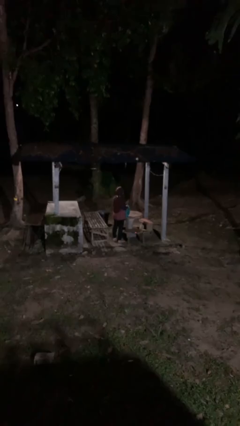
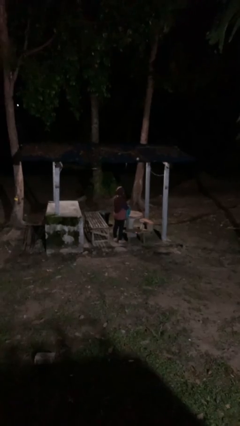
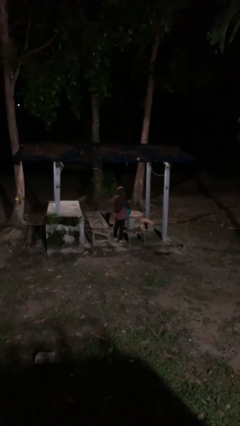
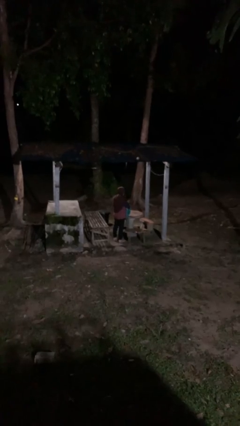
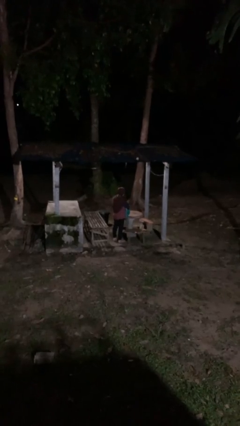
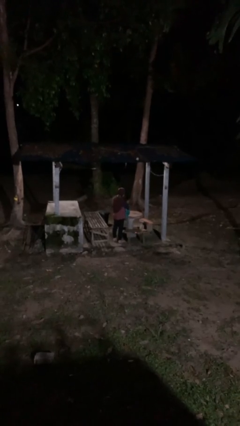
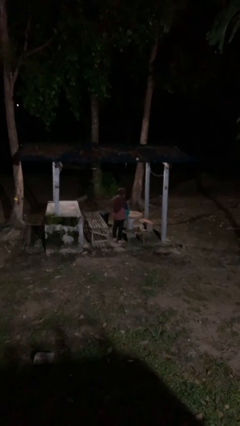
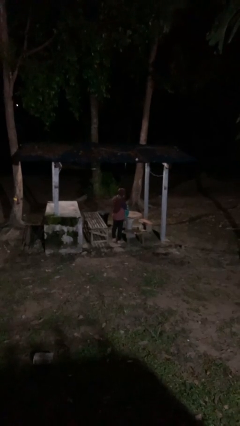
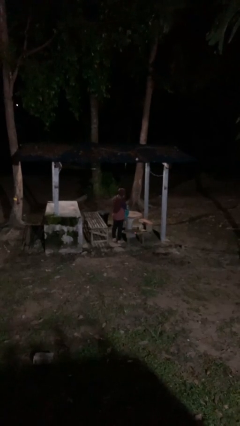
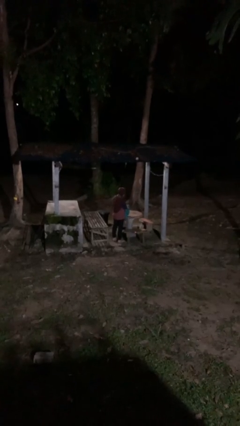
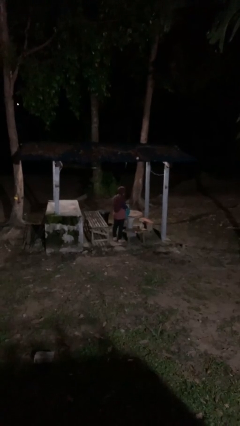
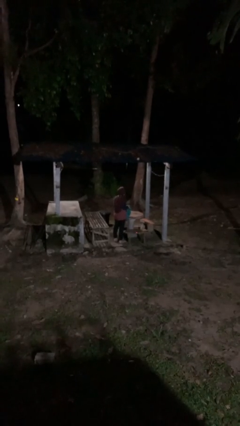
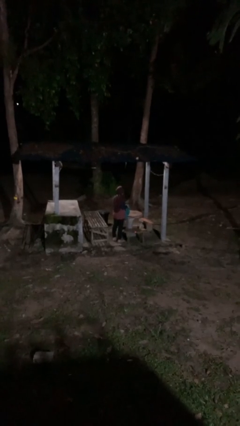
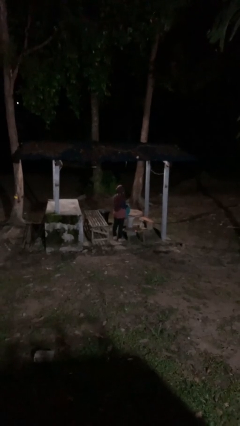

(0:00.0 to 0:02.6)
person searches in bag

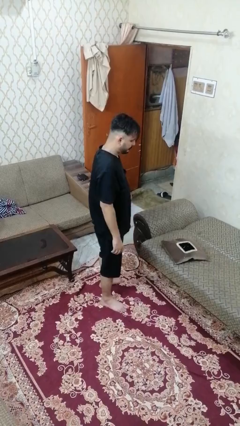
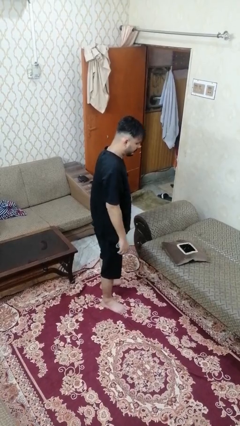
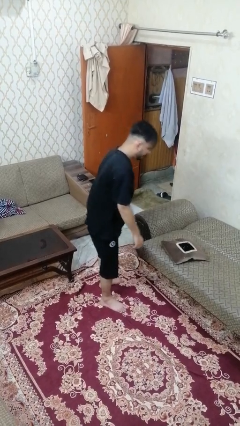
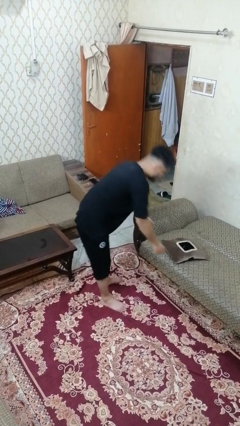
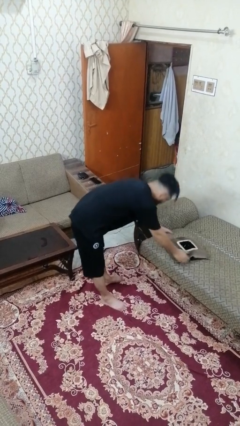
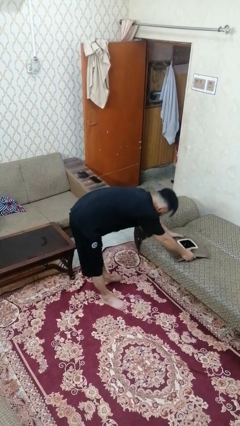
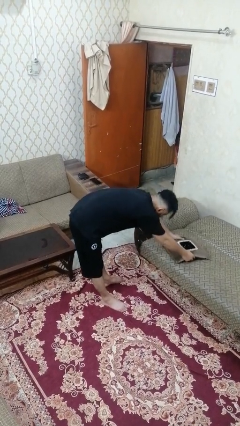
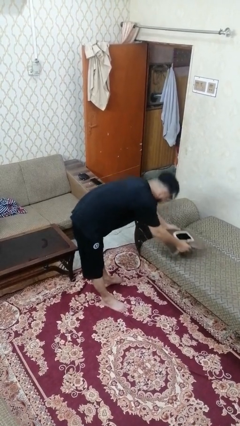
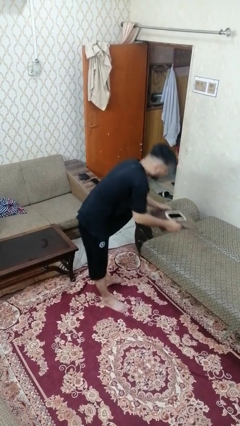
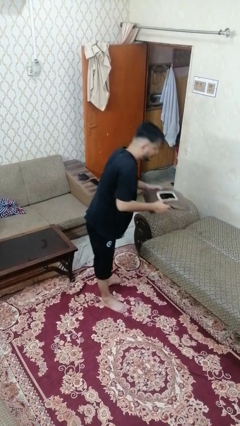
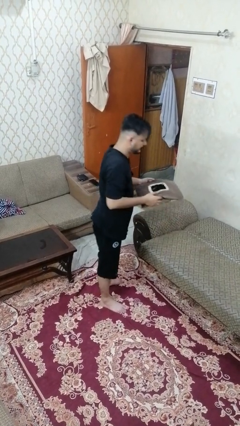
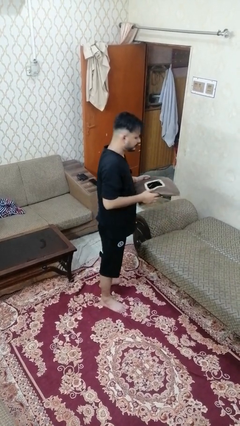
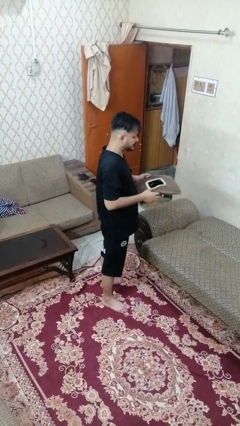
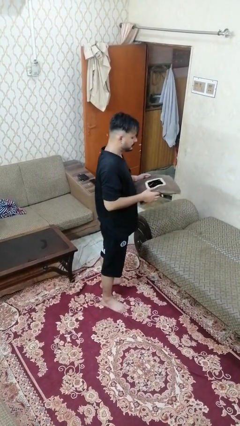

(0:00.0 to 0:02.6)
person picks up object from couch

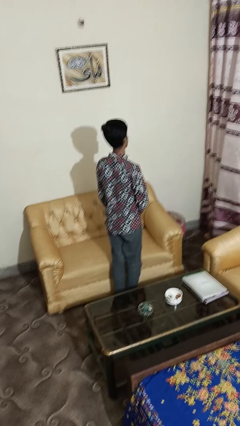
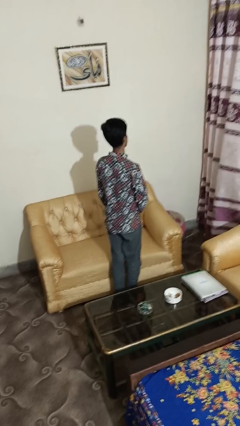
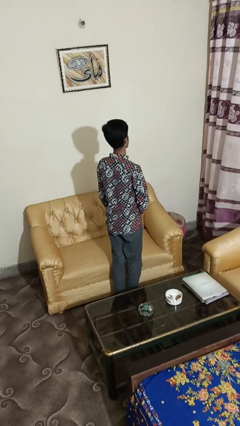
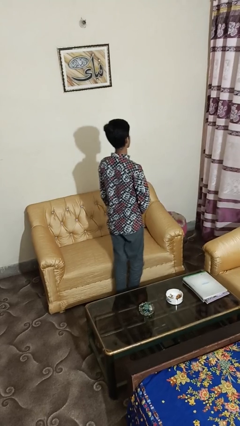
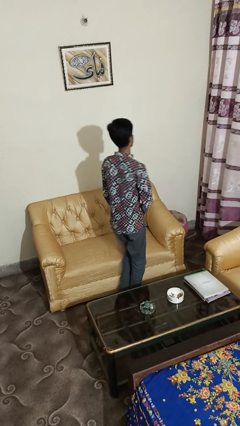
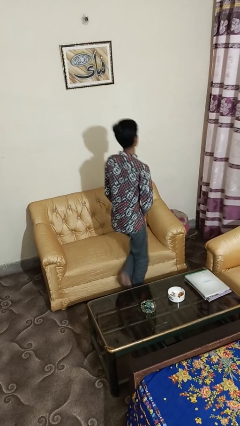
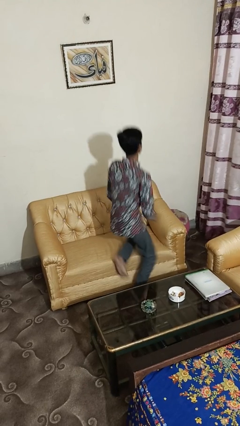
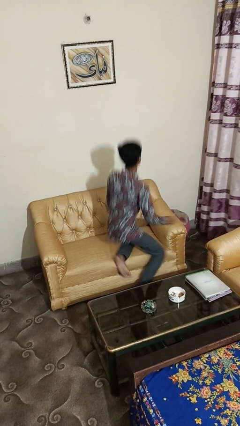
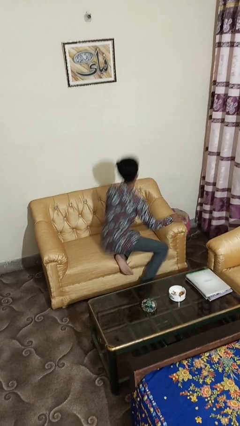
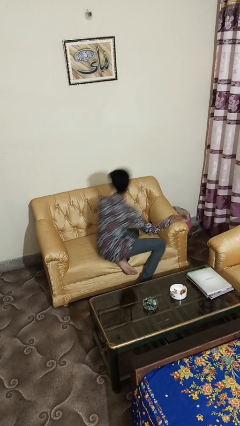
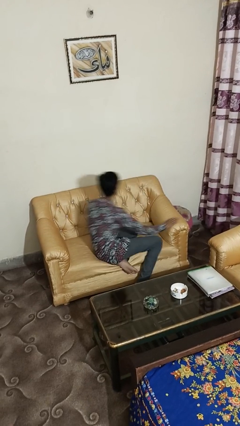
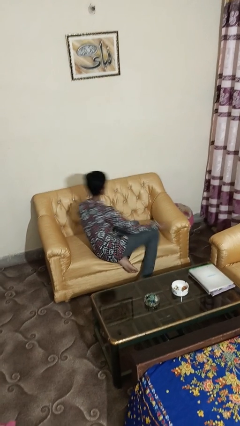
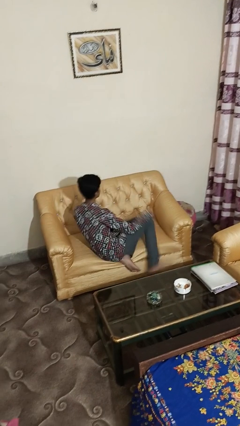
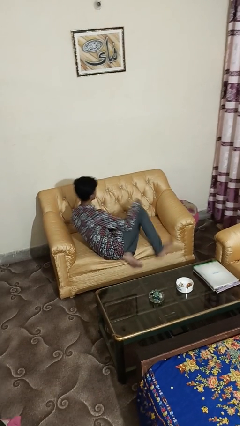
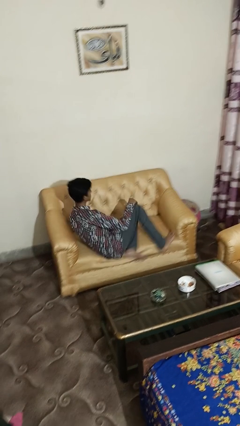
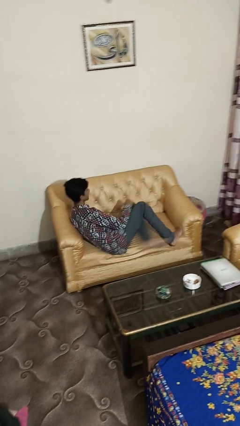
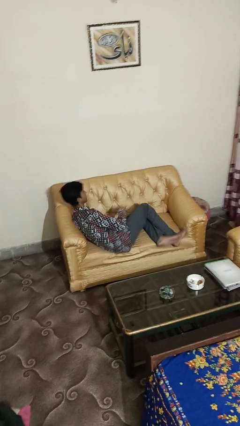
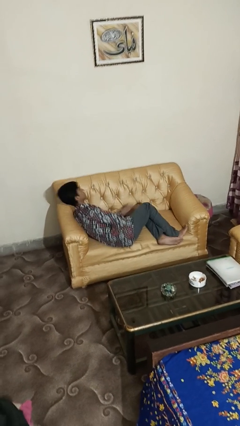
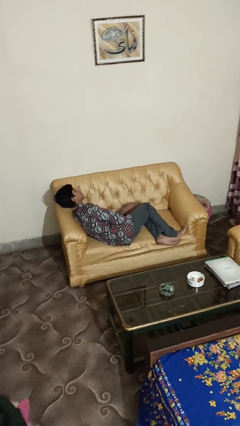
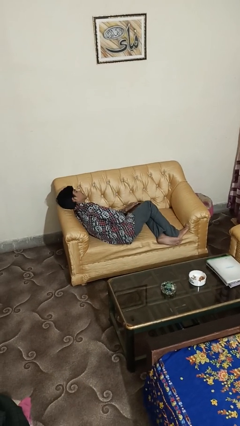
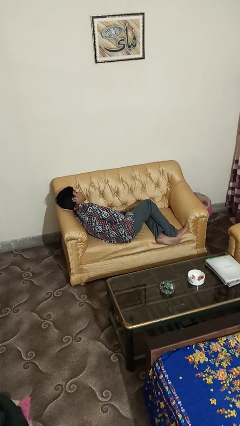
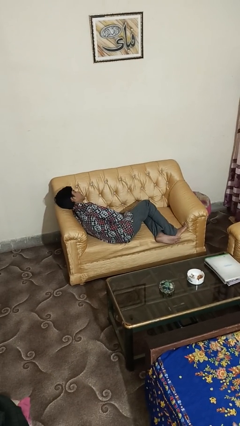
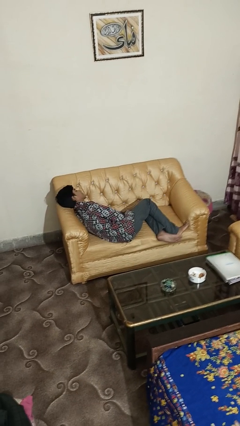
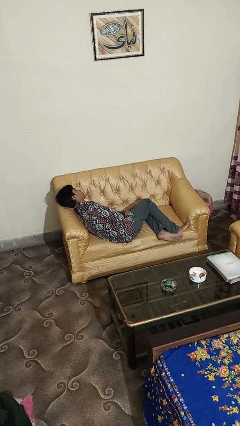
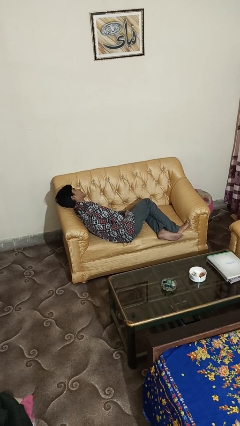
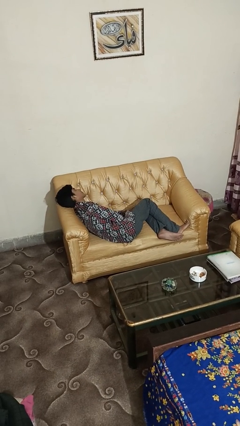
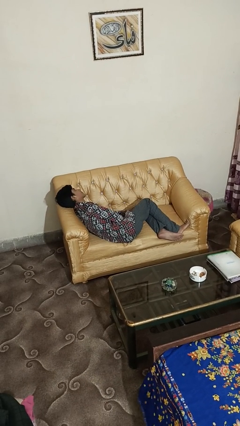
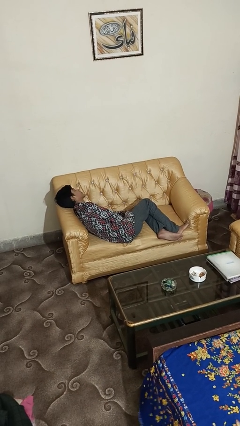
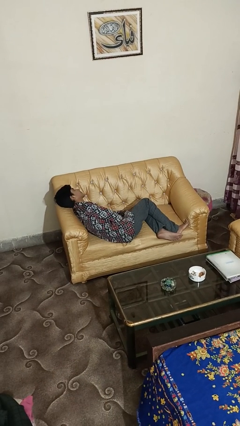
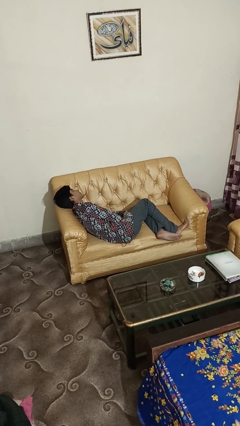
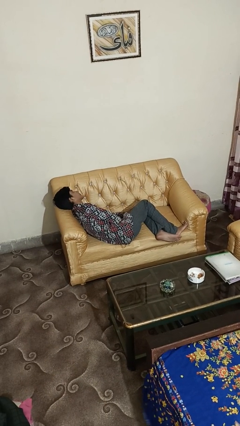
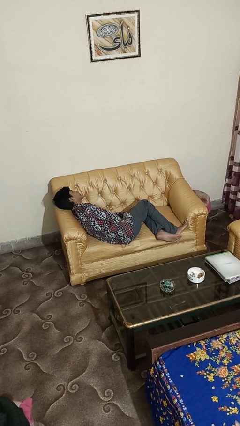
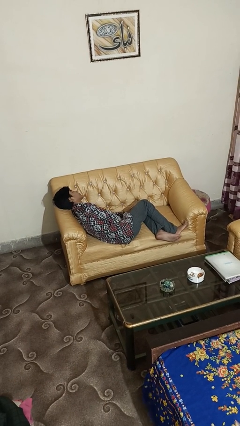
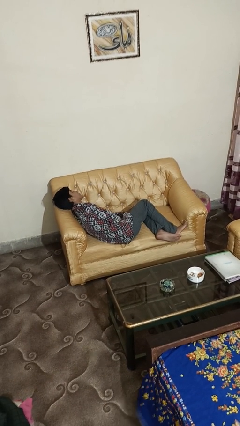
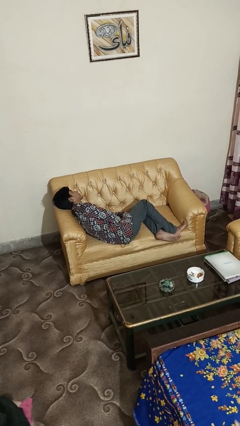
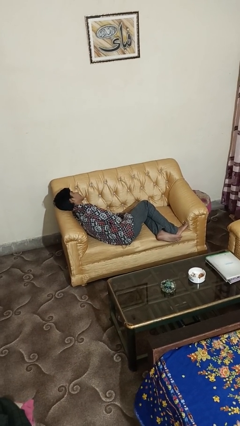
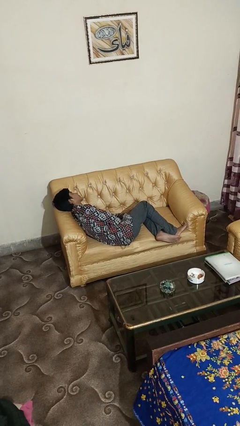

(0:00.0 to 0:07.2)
person lies down on couch

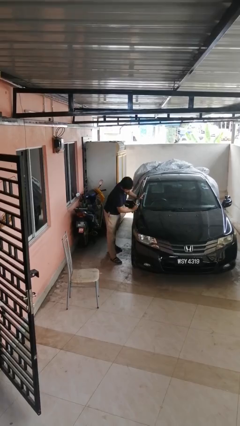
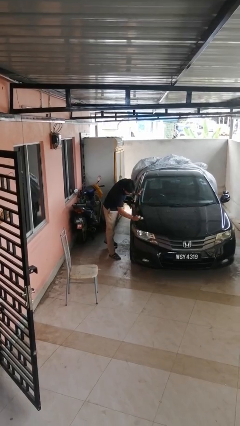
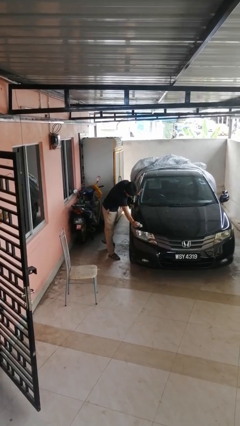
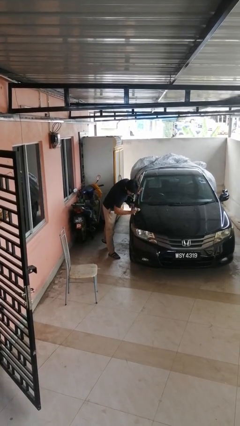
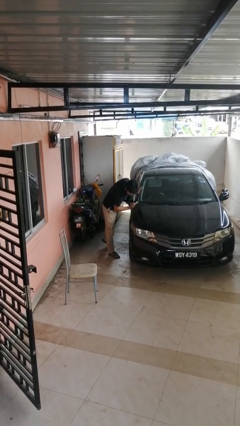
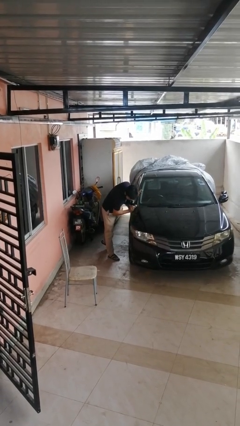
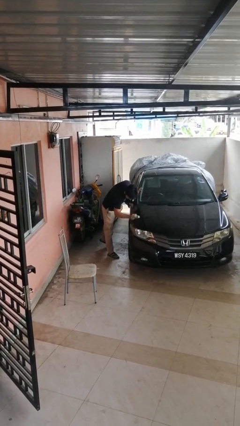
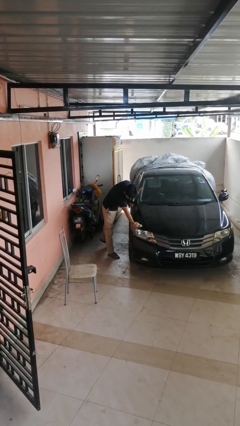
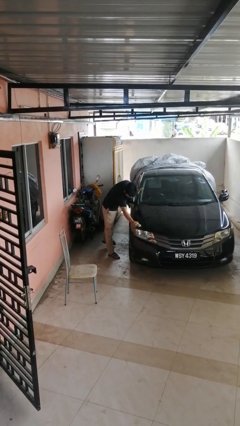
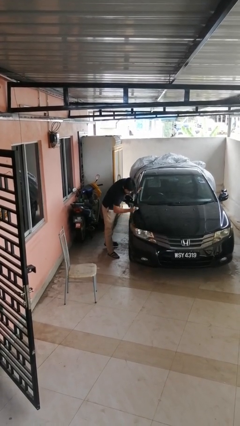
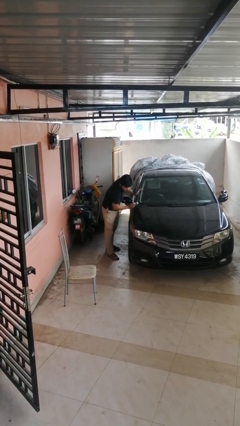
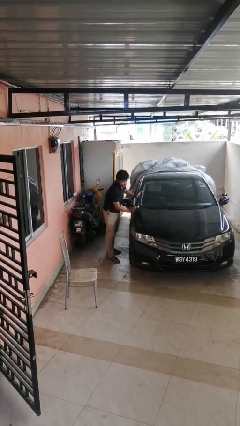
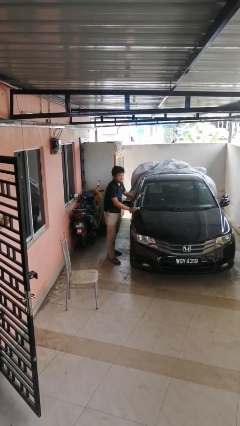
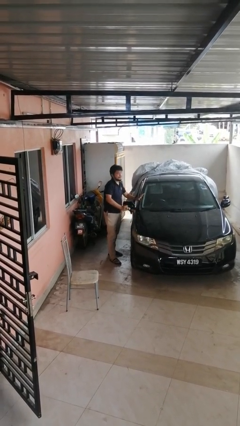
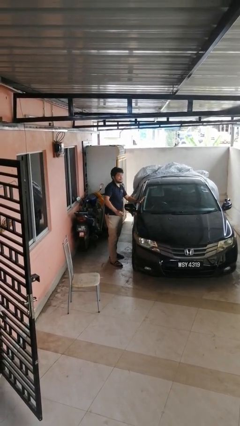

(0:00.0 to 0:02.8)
person polishes car with rag

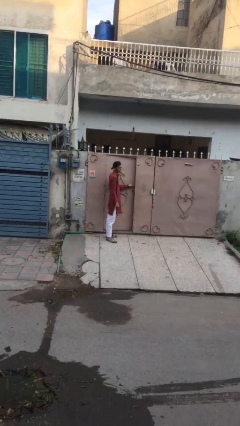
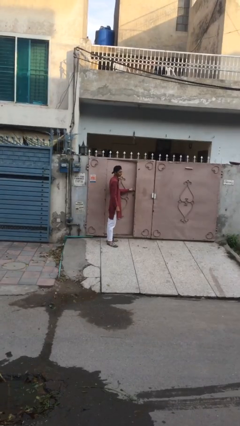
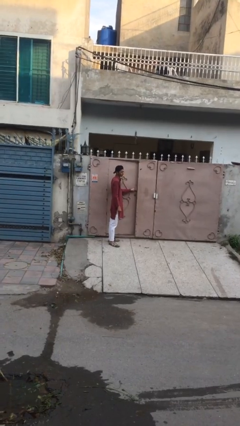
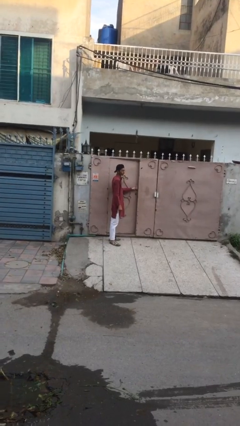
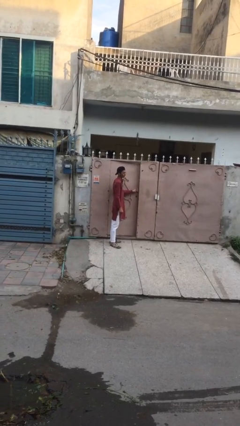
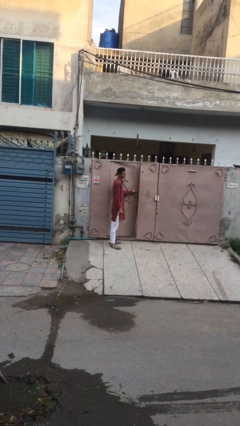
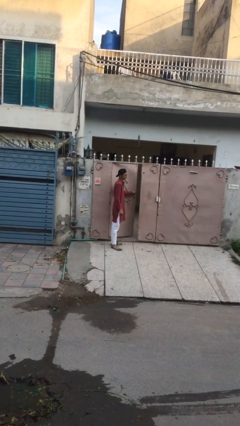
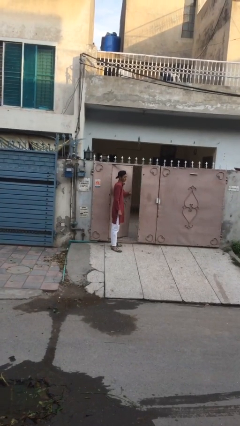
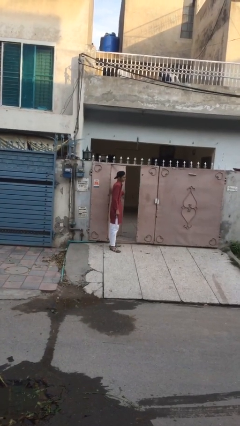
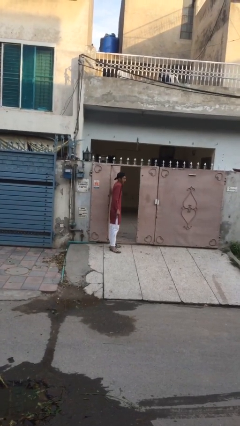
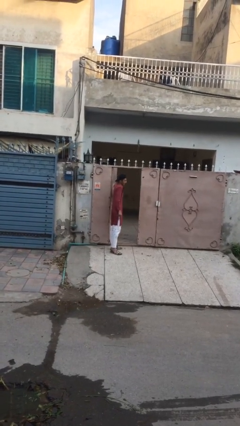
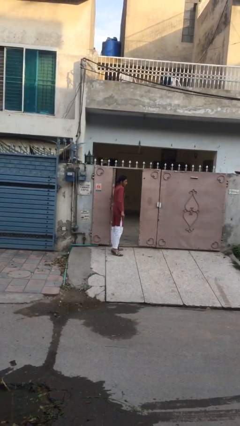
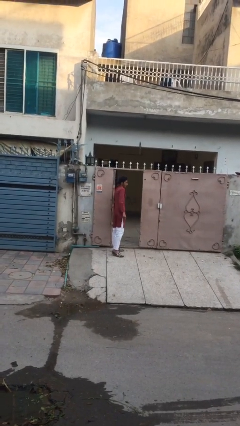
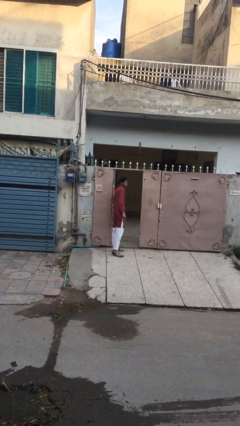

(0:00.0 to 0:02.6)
person opens facility door
